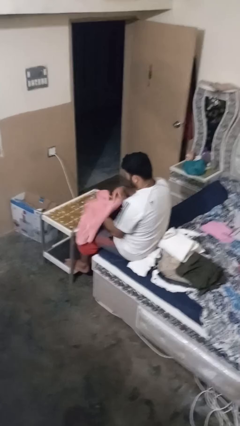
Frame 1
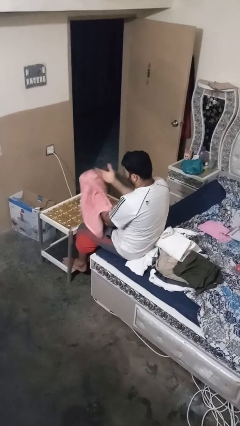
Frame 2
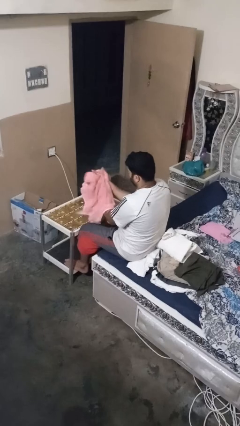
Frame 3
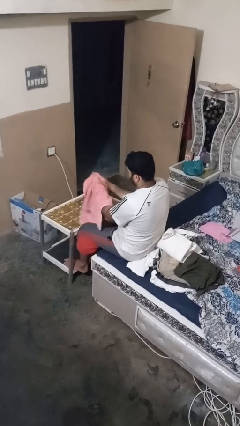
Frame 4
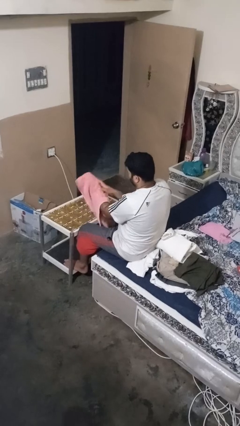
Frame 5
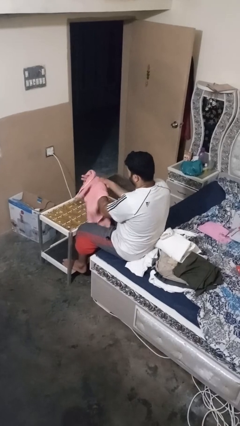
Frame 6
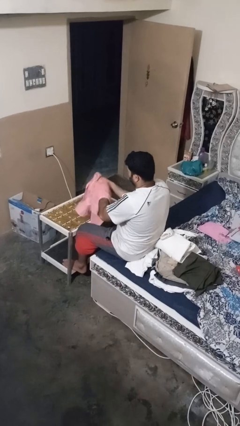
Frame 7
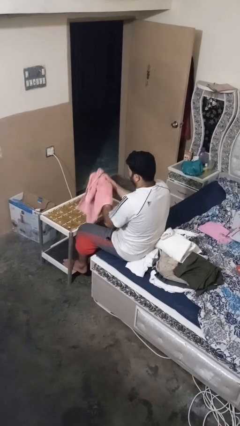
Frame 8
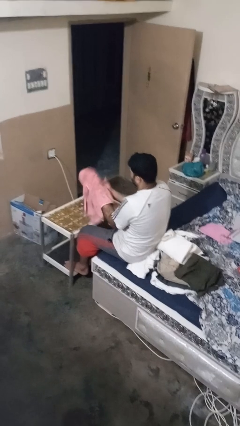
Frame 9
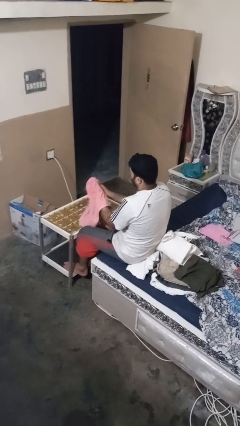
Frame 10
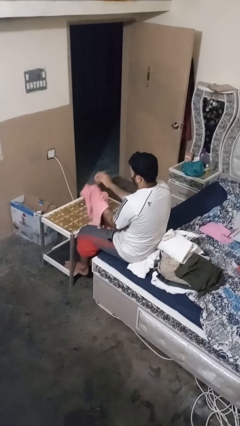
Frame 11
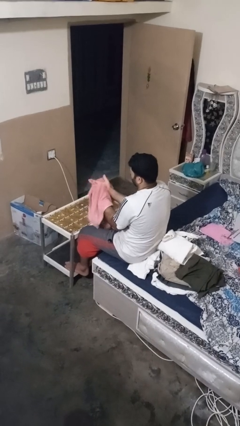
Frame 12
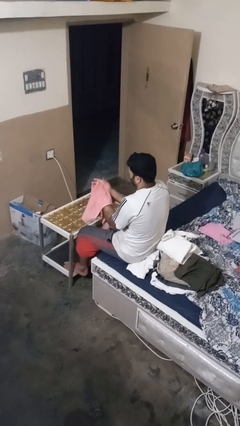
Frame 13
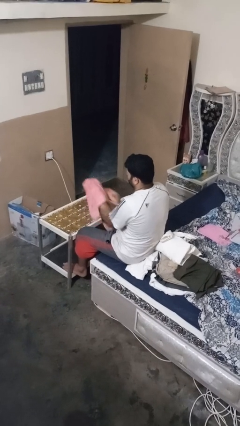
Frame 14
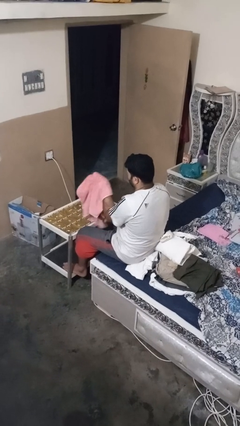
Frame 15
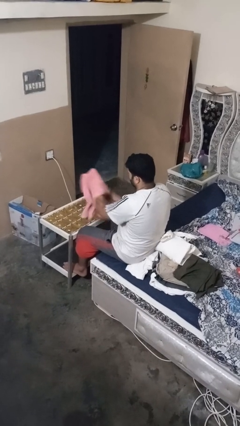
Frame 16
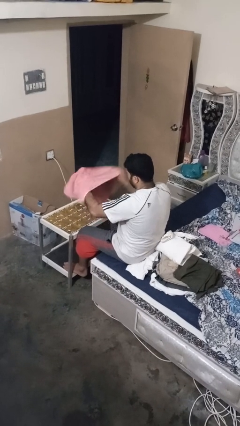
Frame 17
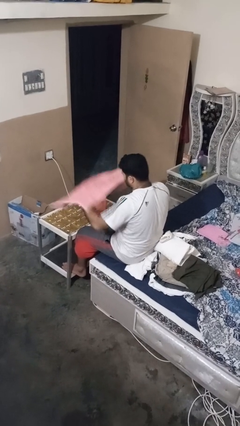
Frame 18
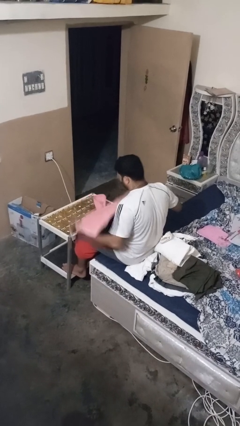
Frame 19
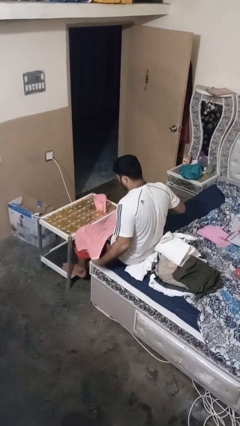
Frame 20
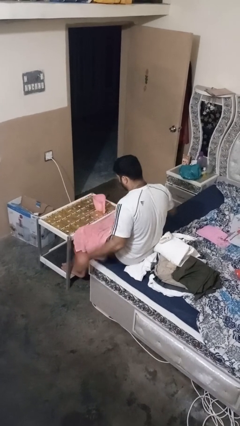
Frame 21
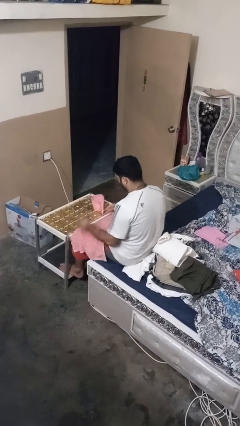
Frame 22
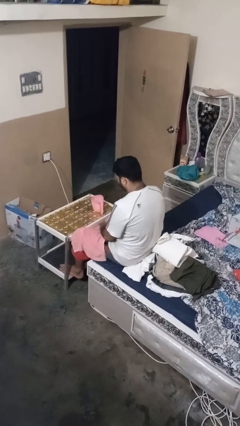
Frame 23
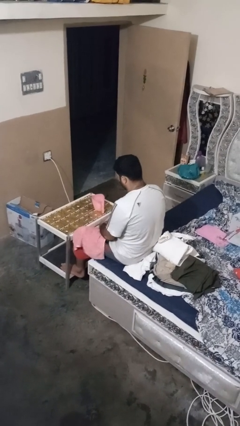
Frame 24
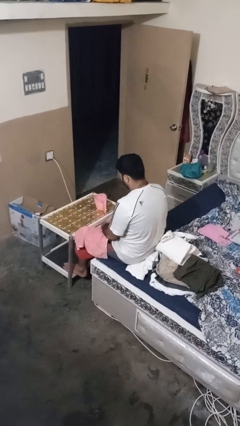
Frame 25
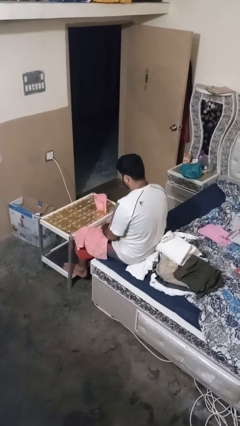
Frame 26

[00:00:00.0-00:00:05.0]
person dries hands with towel

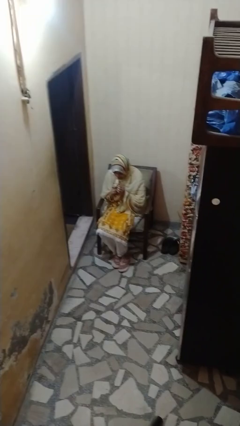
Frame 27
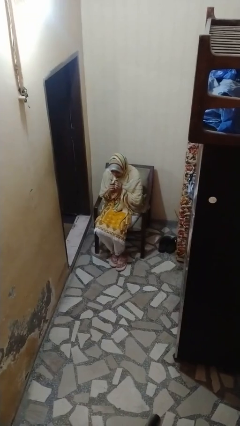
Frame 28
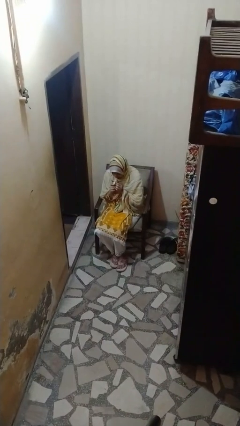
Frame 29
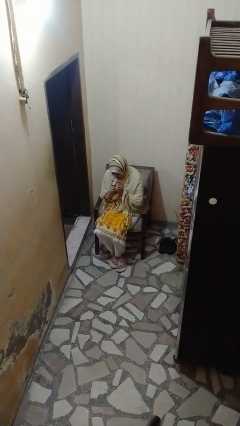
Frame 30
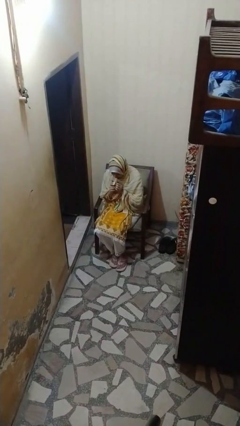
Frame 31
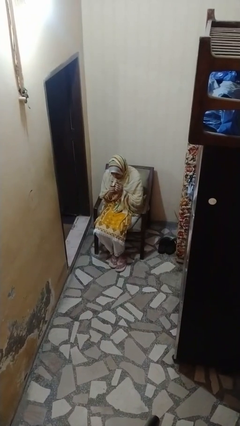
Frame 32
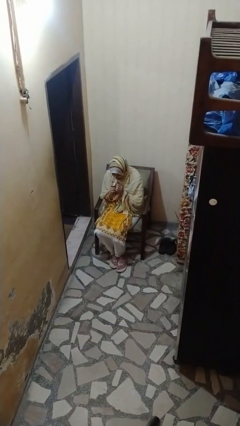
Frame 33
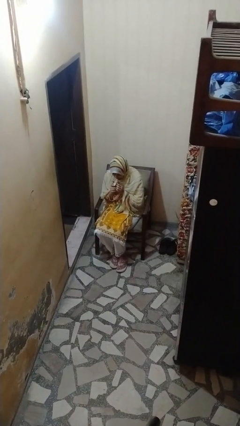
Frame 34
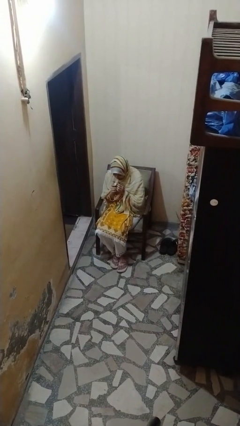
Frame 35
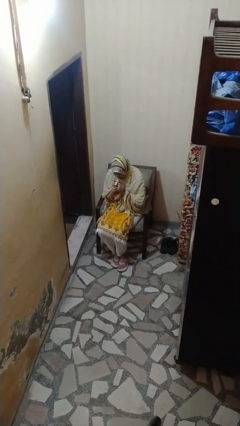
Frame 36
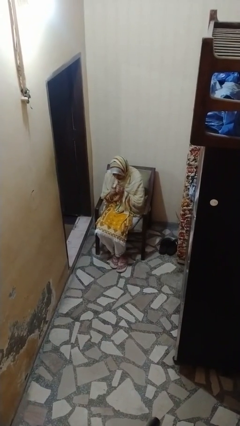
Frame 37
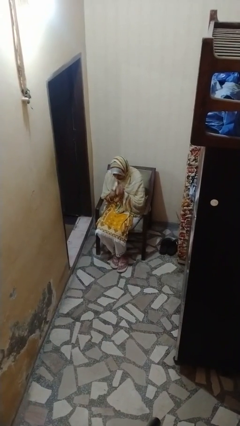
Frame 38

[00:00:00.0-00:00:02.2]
person eats banana

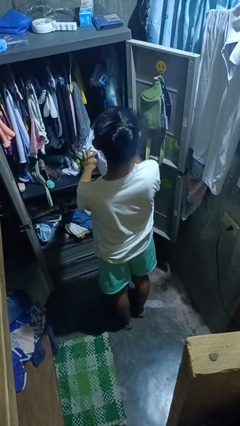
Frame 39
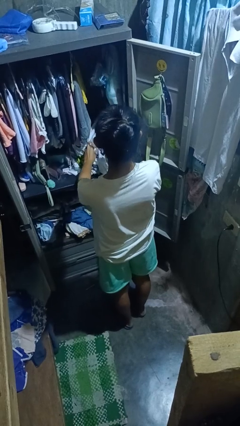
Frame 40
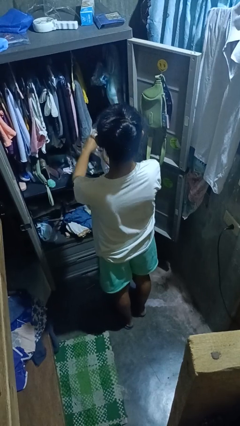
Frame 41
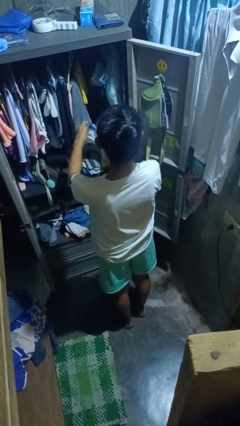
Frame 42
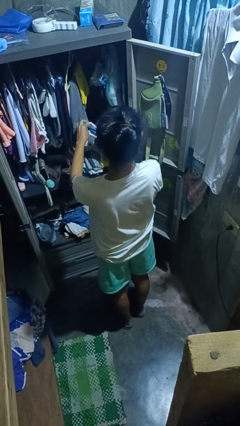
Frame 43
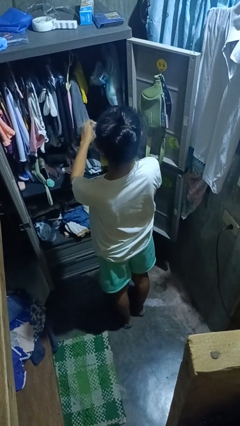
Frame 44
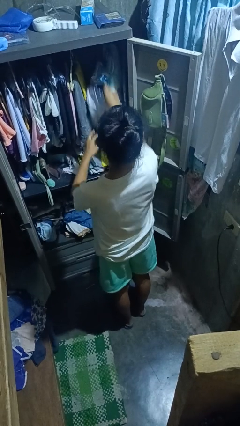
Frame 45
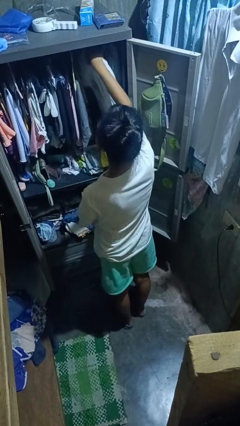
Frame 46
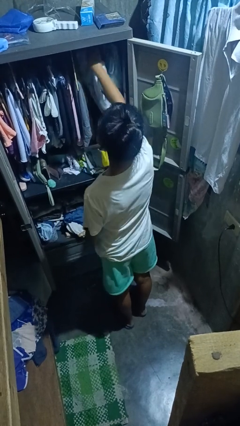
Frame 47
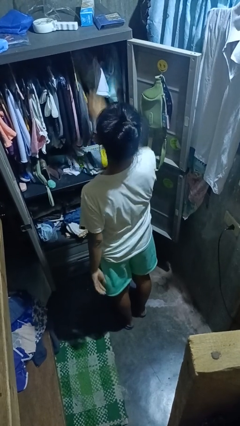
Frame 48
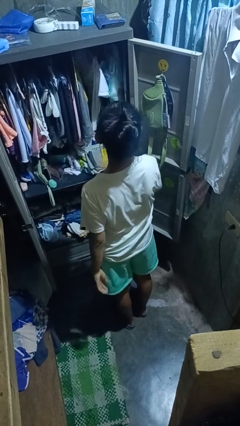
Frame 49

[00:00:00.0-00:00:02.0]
person puts clothes into closet

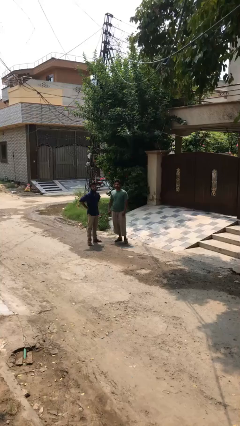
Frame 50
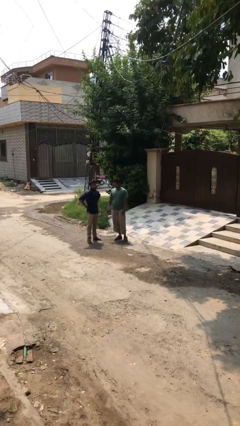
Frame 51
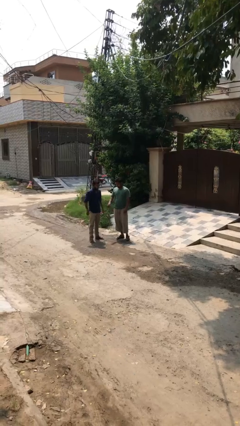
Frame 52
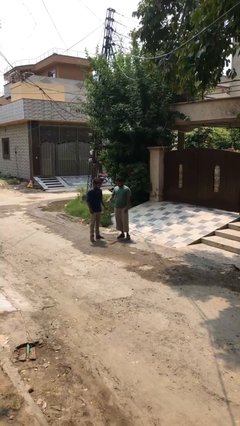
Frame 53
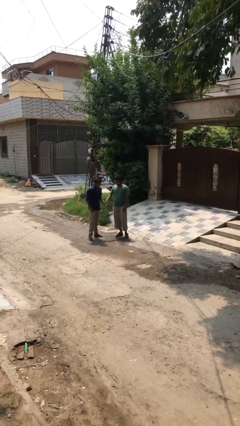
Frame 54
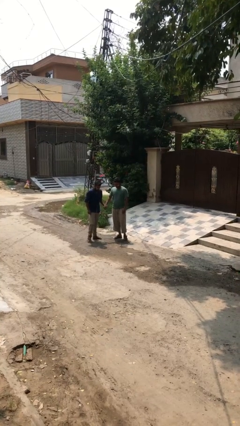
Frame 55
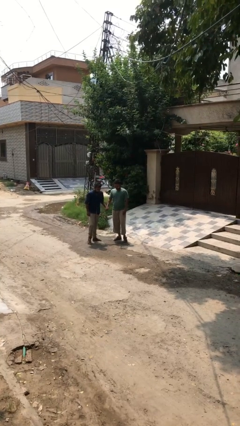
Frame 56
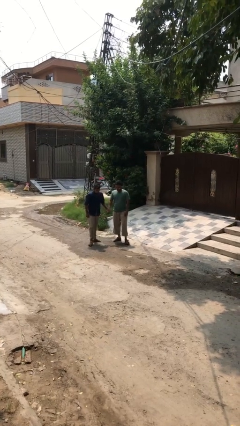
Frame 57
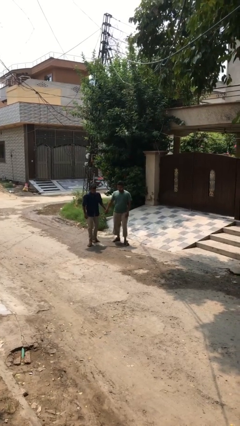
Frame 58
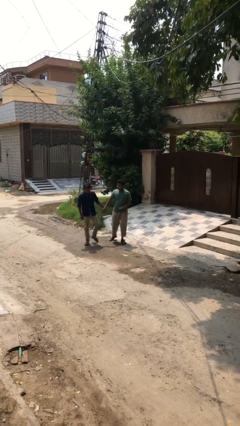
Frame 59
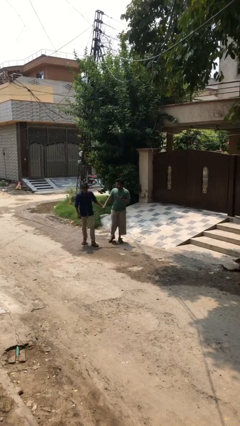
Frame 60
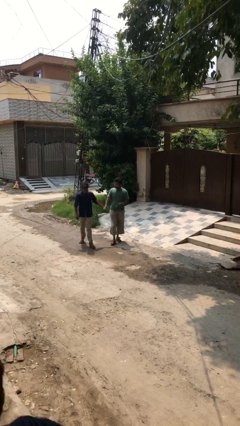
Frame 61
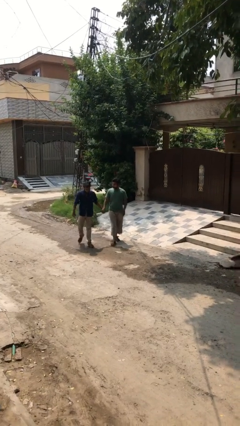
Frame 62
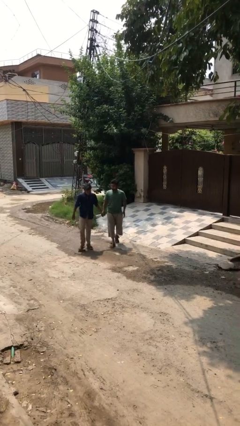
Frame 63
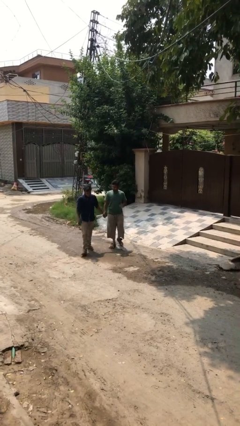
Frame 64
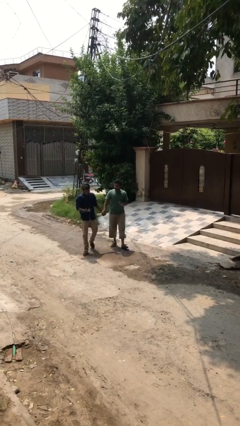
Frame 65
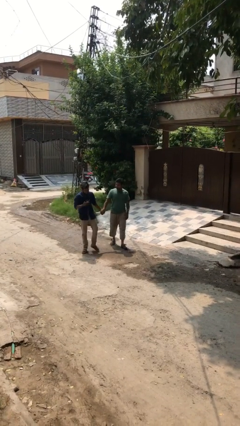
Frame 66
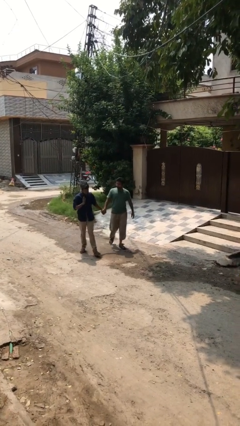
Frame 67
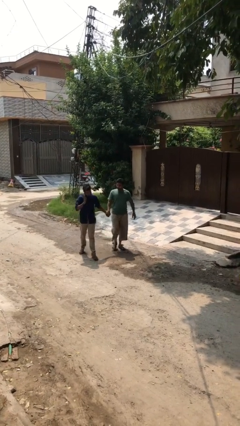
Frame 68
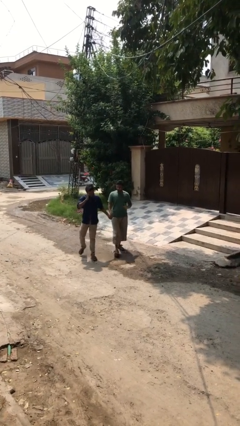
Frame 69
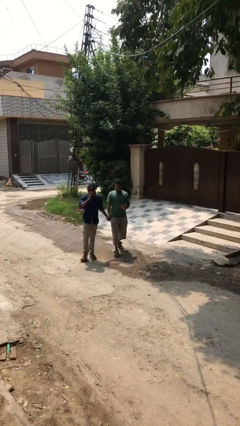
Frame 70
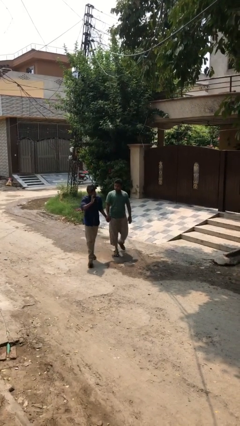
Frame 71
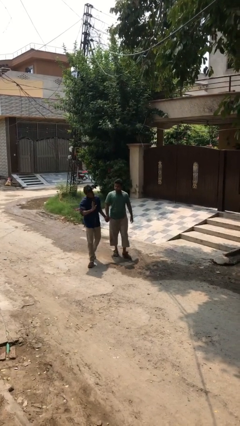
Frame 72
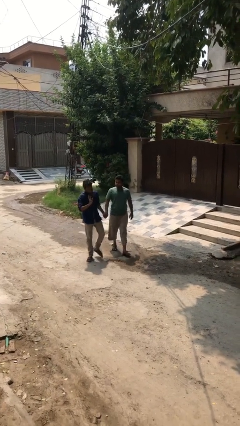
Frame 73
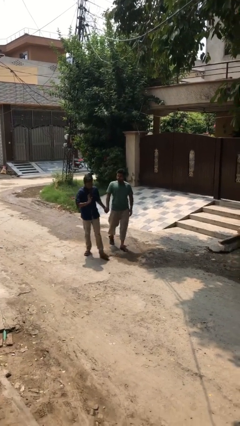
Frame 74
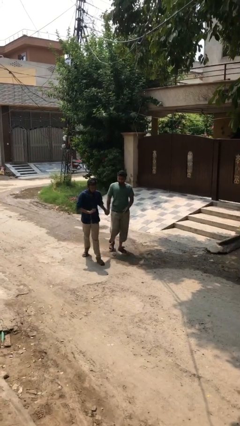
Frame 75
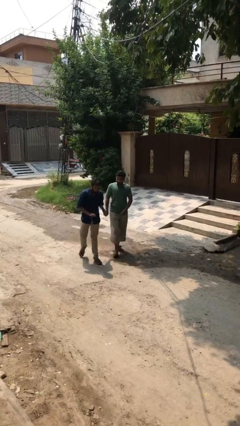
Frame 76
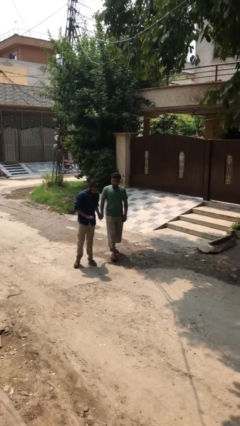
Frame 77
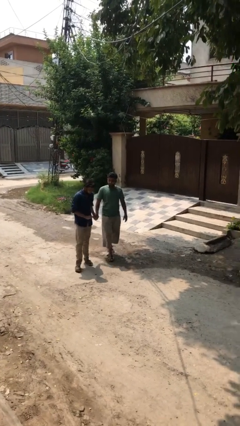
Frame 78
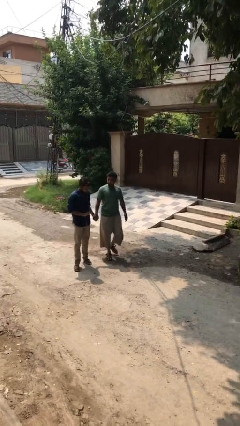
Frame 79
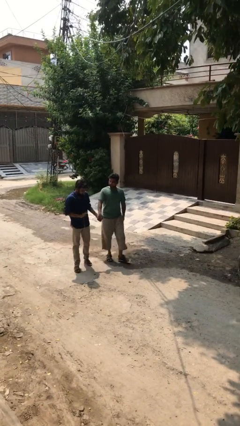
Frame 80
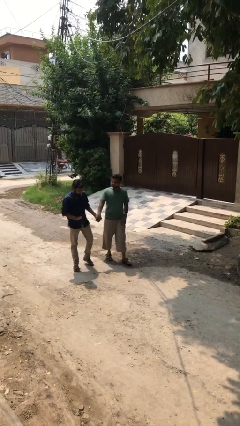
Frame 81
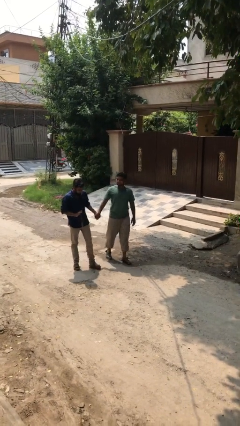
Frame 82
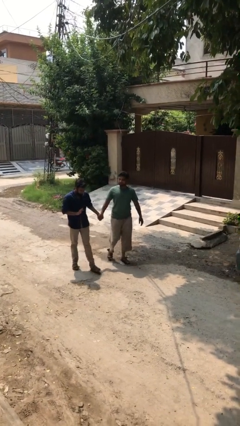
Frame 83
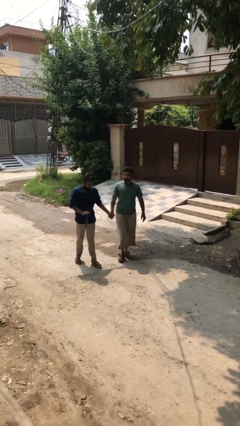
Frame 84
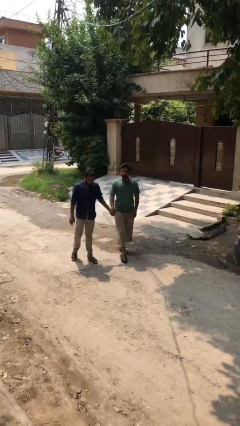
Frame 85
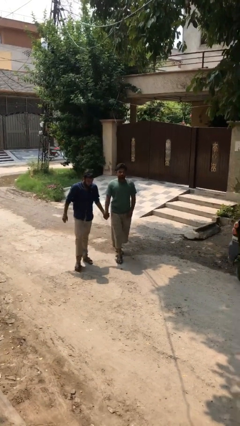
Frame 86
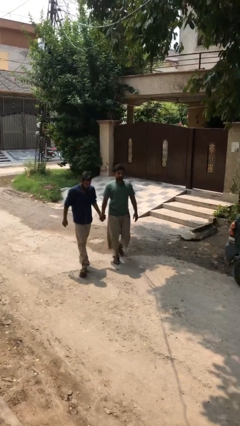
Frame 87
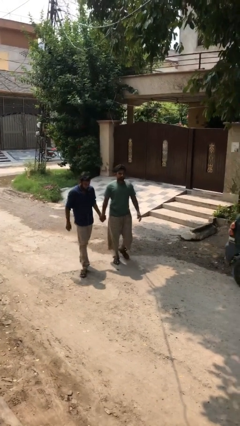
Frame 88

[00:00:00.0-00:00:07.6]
person holds hand

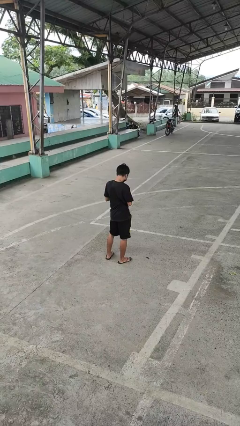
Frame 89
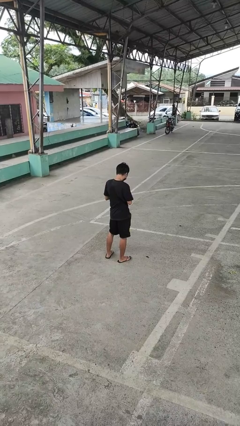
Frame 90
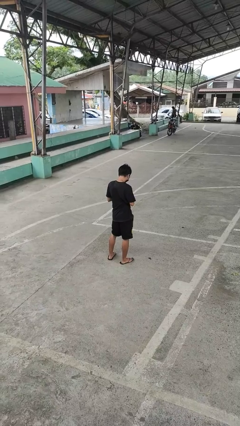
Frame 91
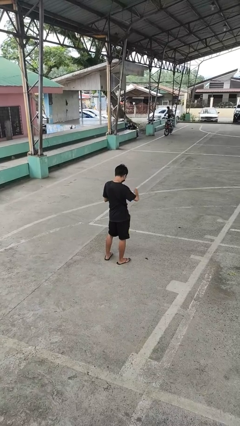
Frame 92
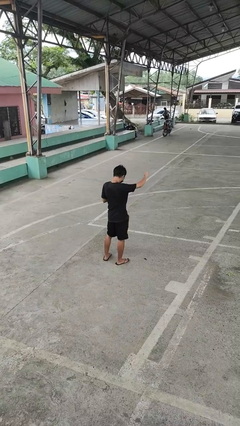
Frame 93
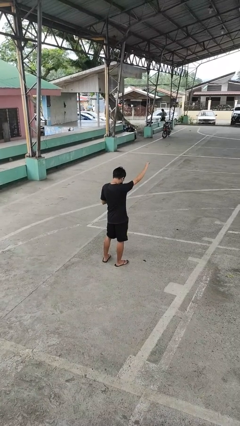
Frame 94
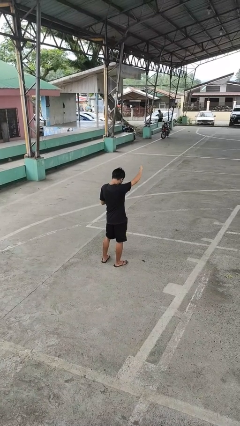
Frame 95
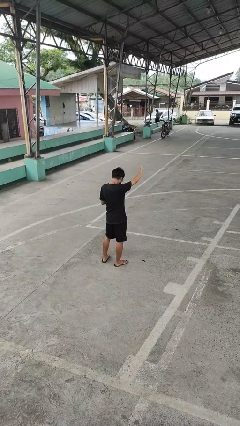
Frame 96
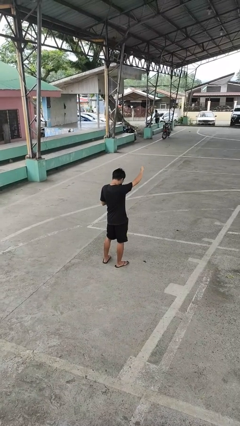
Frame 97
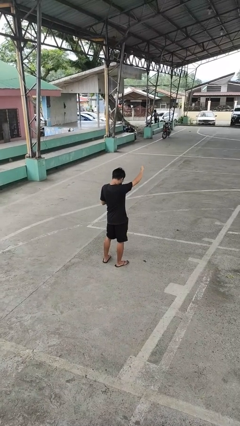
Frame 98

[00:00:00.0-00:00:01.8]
person gestures thumbs down
